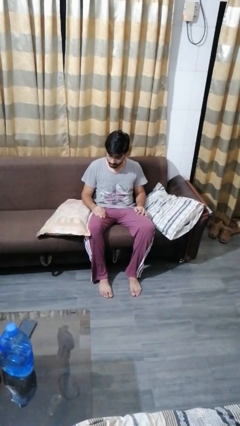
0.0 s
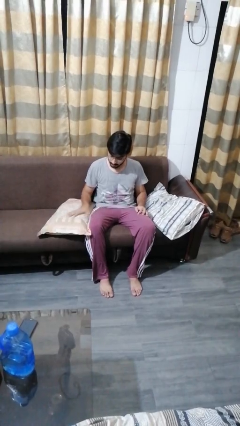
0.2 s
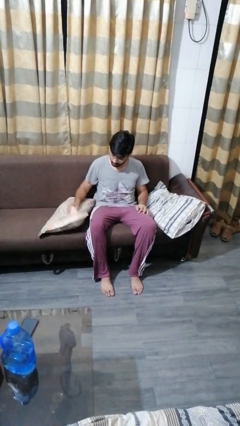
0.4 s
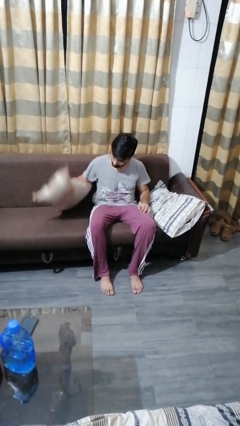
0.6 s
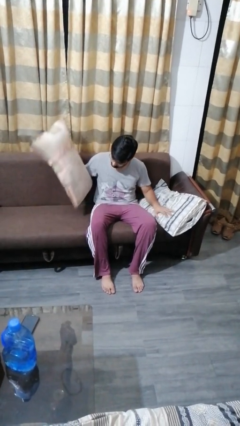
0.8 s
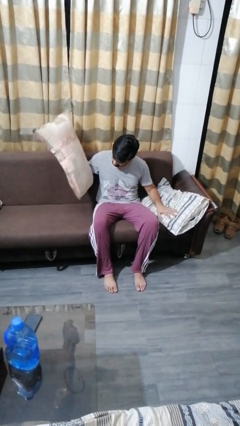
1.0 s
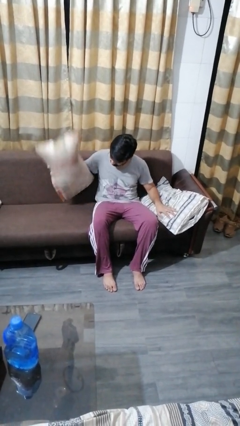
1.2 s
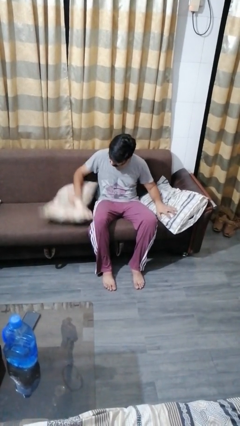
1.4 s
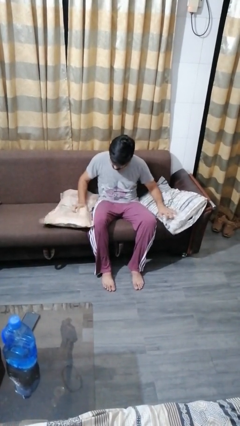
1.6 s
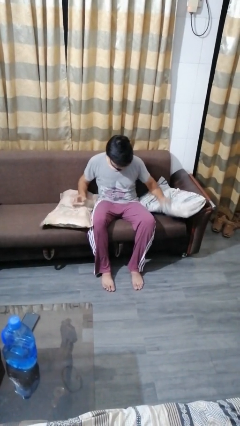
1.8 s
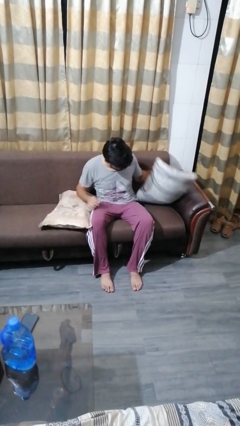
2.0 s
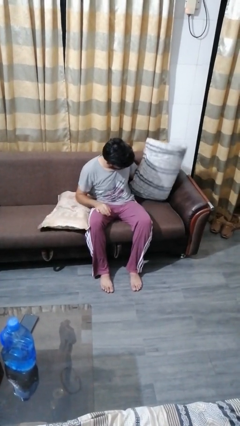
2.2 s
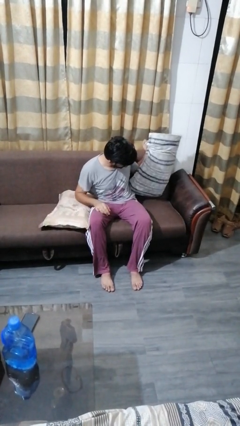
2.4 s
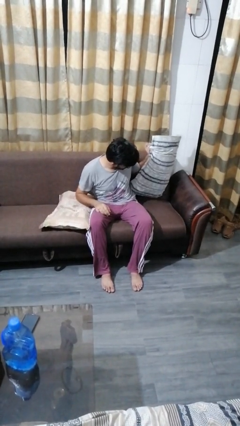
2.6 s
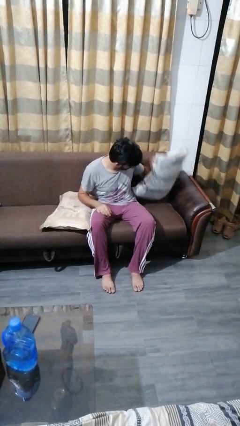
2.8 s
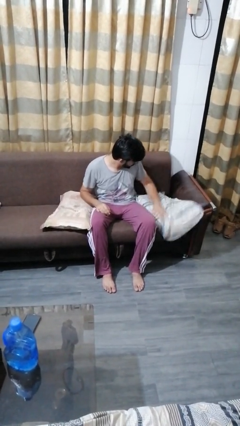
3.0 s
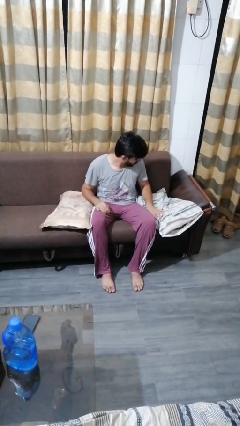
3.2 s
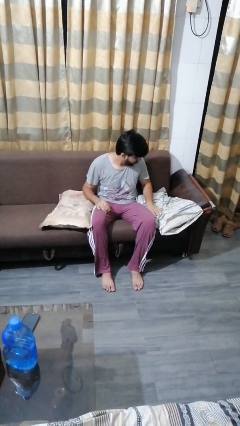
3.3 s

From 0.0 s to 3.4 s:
person searches in couch

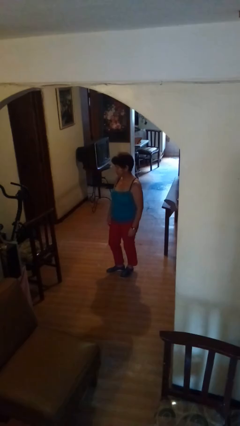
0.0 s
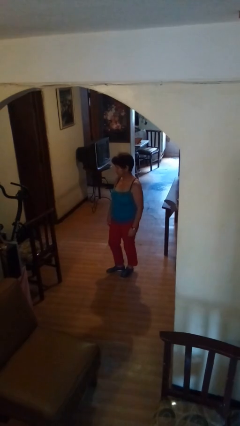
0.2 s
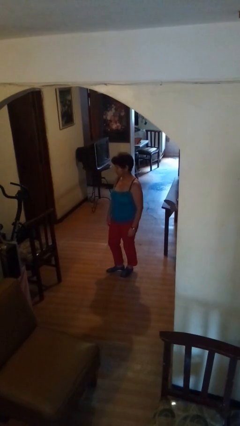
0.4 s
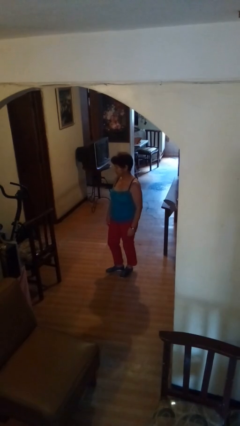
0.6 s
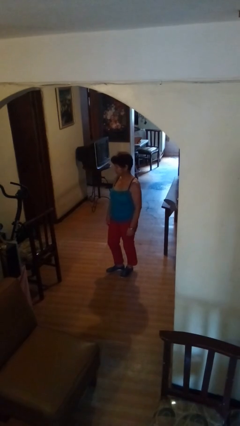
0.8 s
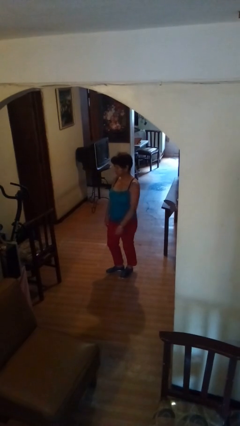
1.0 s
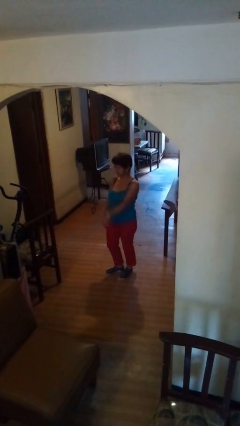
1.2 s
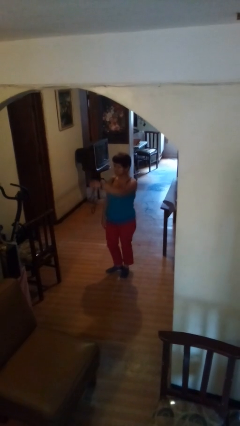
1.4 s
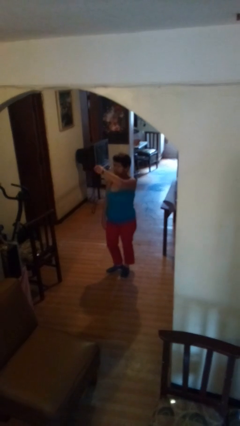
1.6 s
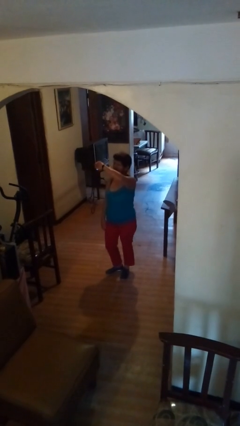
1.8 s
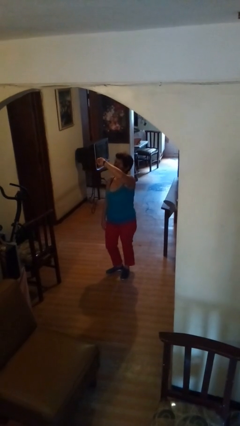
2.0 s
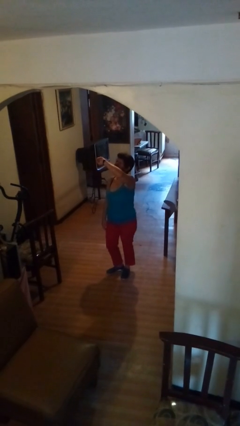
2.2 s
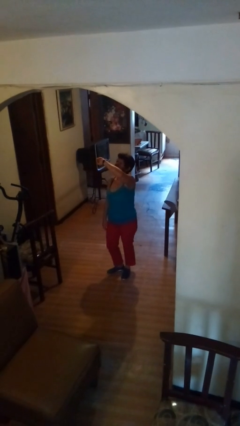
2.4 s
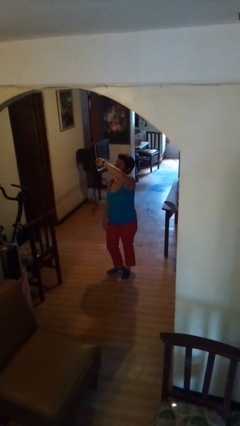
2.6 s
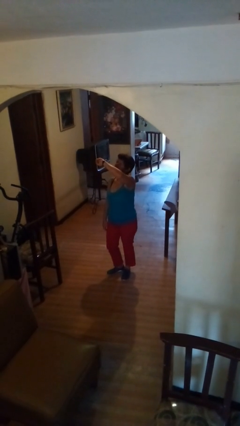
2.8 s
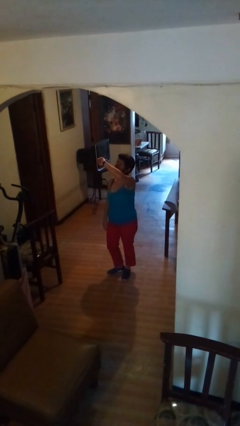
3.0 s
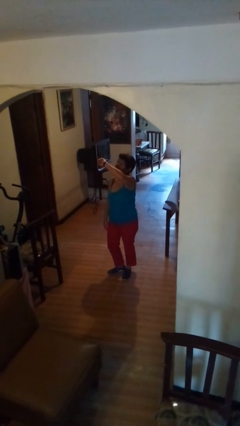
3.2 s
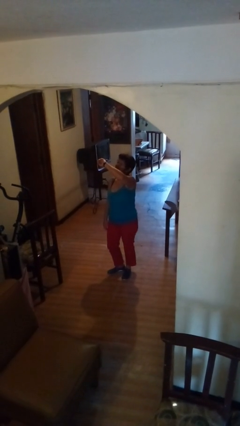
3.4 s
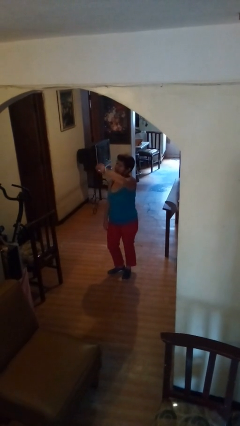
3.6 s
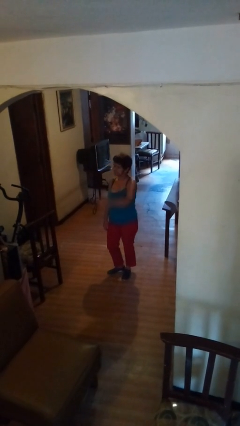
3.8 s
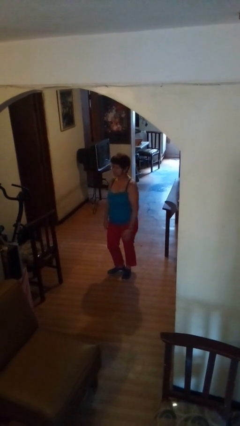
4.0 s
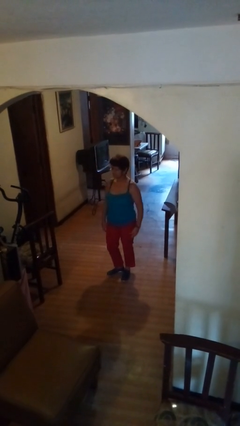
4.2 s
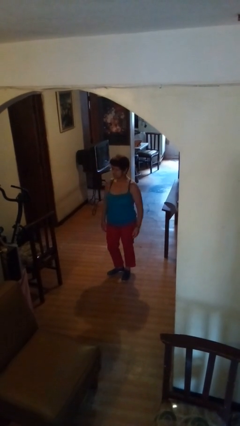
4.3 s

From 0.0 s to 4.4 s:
person looks at wristwatch

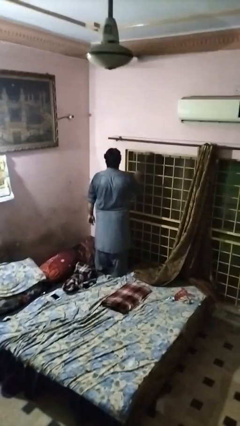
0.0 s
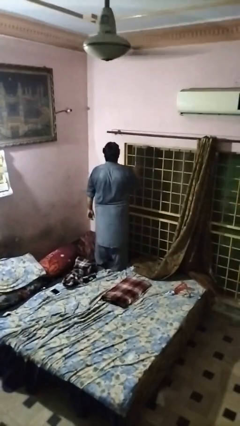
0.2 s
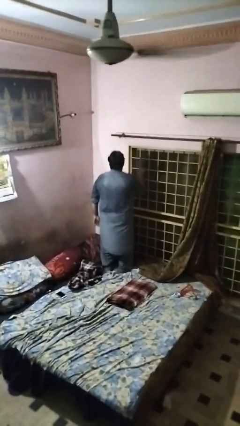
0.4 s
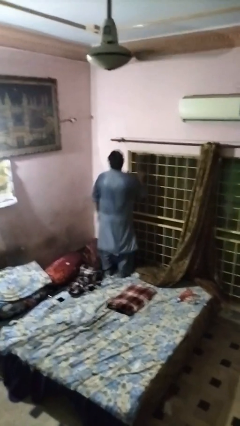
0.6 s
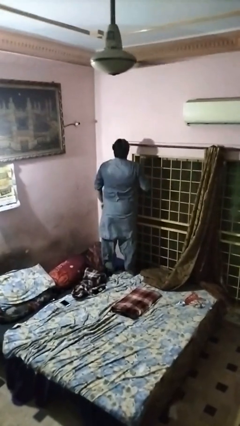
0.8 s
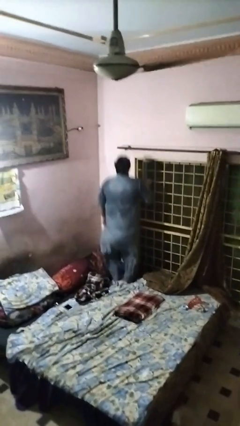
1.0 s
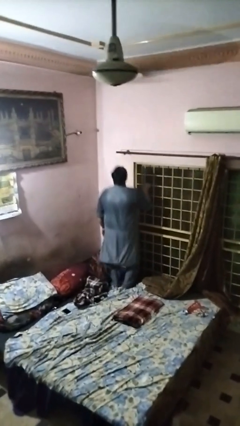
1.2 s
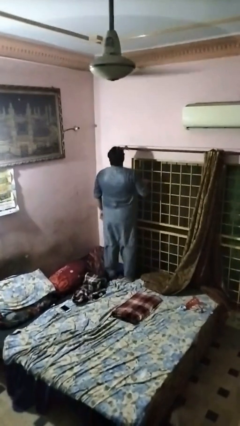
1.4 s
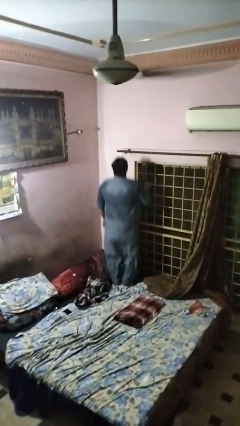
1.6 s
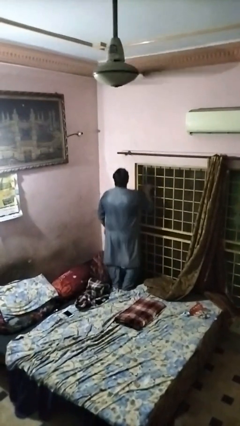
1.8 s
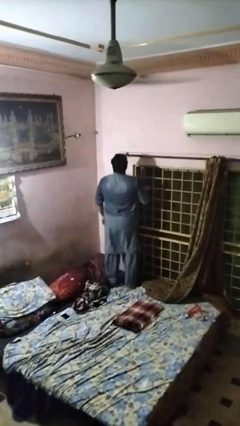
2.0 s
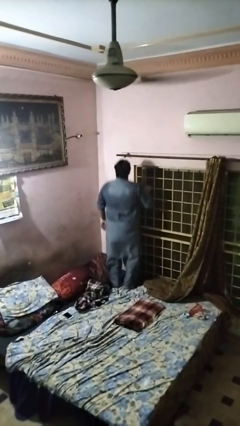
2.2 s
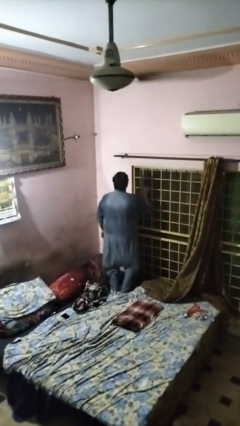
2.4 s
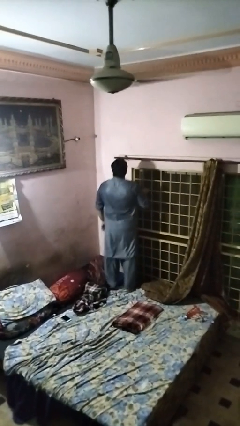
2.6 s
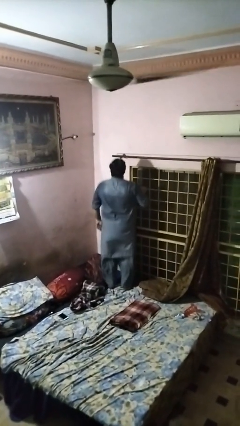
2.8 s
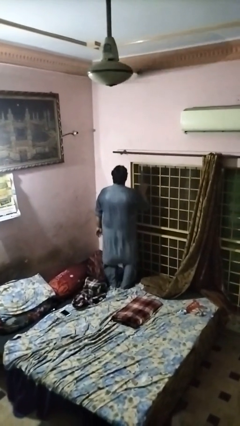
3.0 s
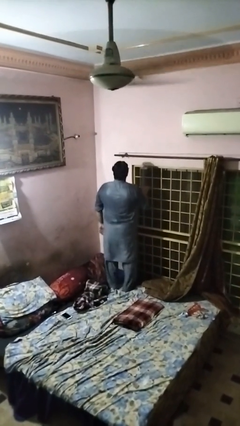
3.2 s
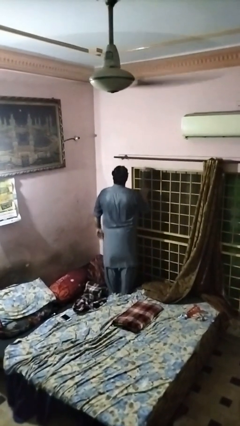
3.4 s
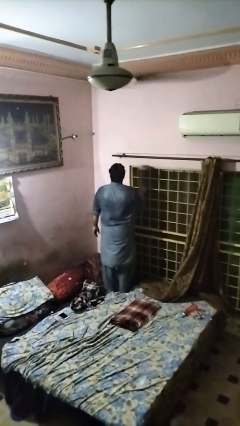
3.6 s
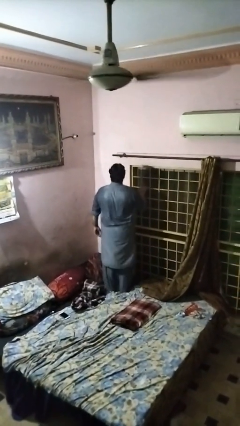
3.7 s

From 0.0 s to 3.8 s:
person jumps on bed

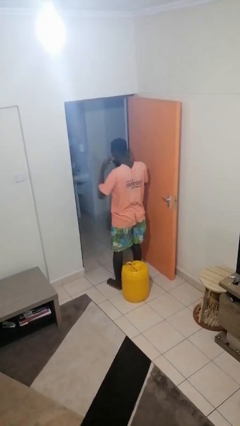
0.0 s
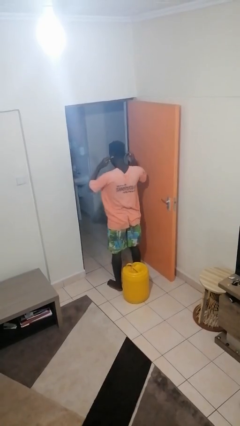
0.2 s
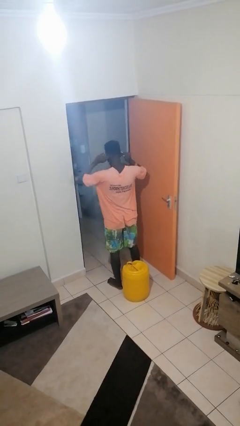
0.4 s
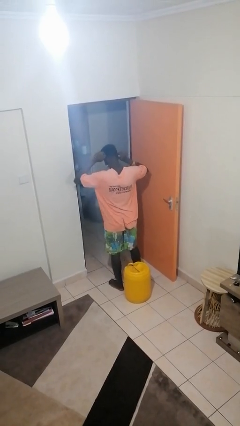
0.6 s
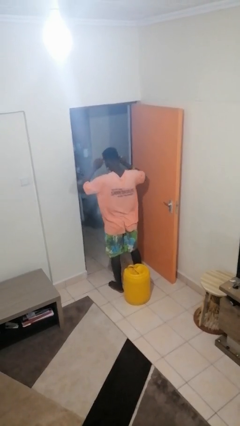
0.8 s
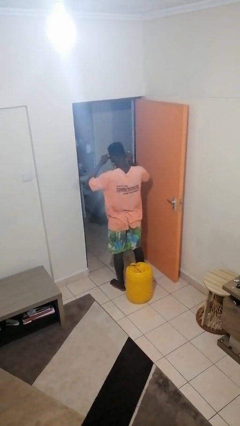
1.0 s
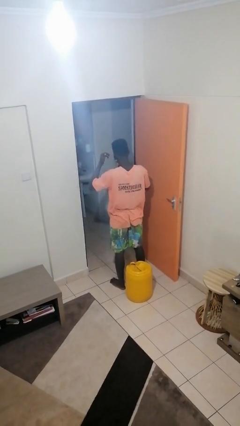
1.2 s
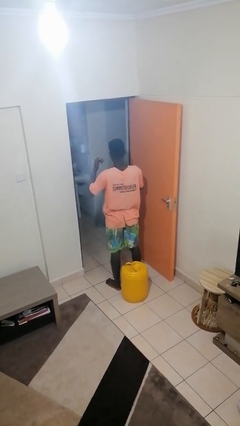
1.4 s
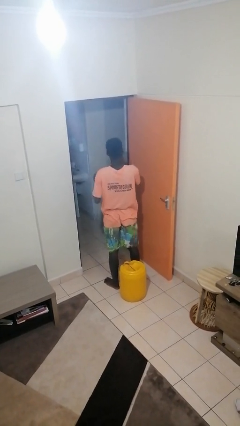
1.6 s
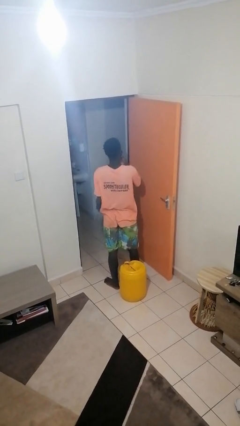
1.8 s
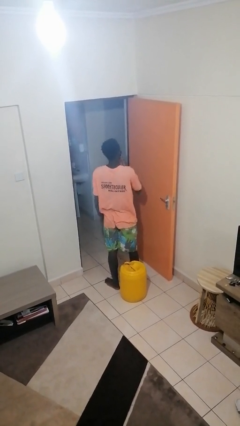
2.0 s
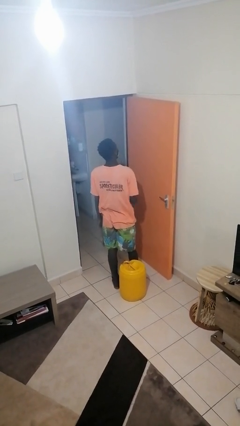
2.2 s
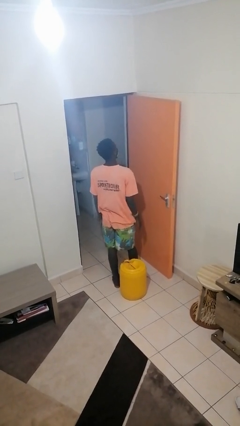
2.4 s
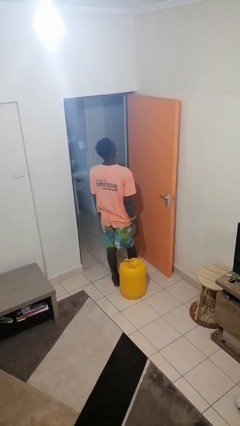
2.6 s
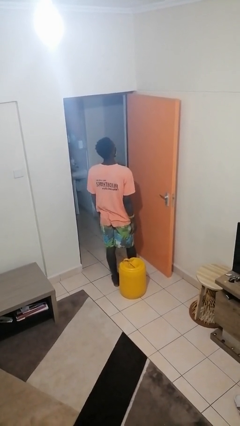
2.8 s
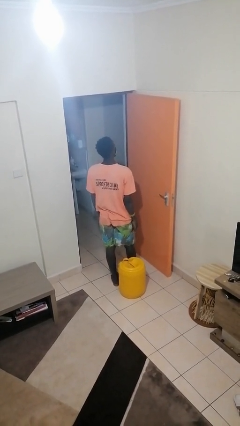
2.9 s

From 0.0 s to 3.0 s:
person puts on facemask

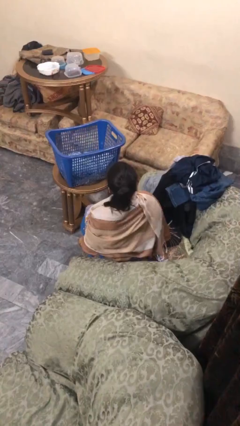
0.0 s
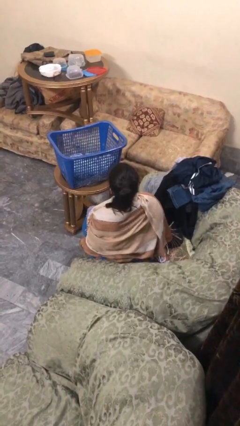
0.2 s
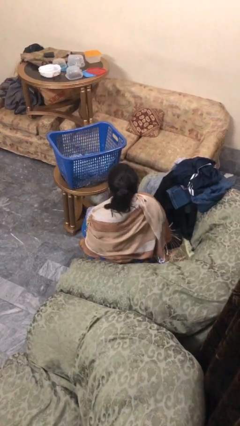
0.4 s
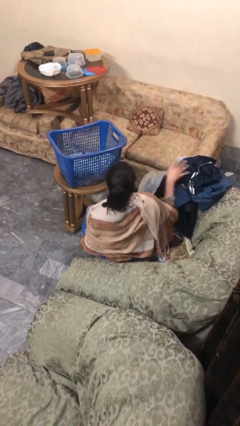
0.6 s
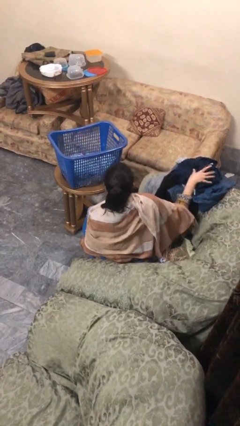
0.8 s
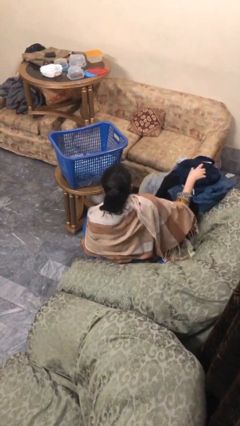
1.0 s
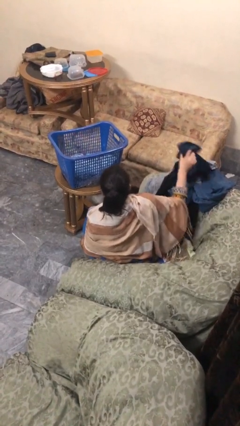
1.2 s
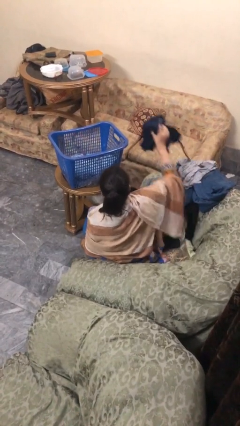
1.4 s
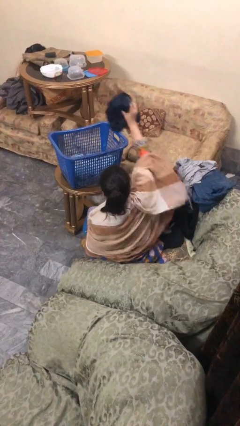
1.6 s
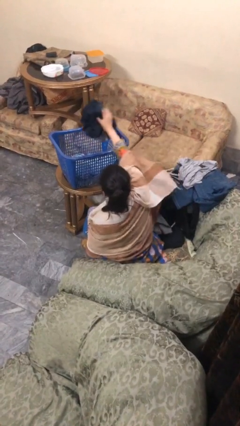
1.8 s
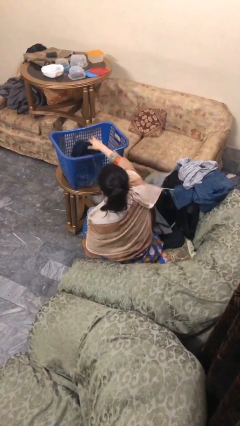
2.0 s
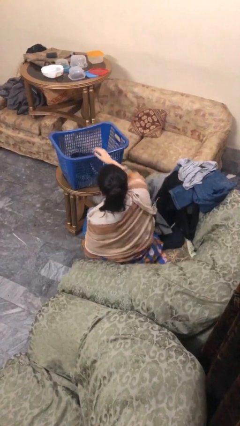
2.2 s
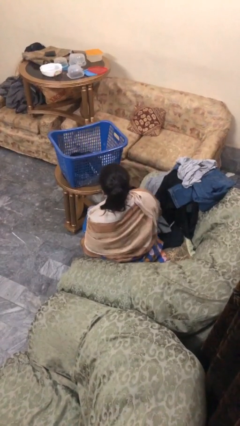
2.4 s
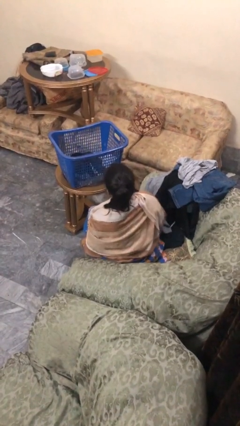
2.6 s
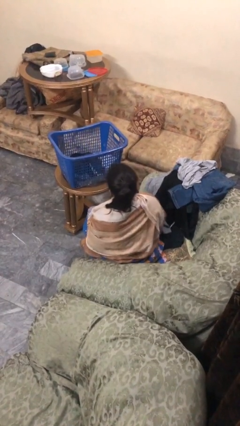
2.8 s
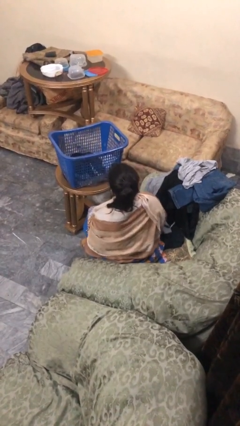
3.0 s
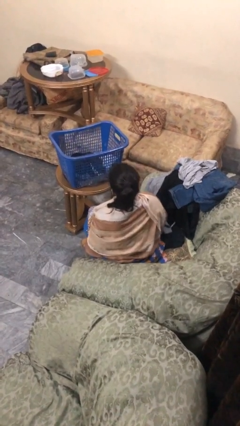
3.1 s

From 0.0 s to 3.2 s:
person puts object into basket
